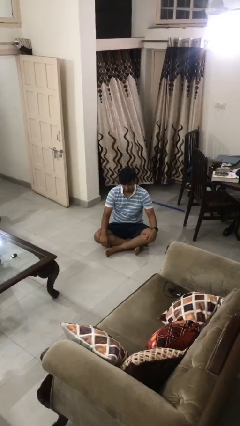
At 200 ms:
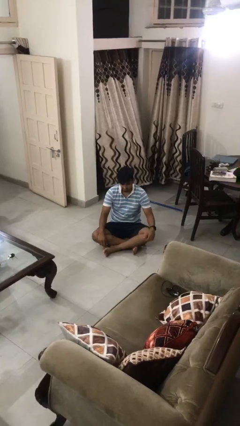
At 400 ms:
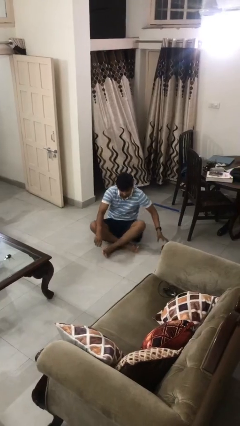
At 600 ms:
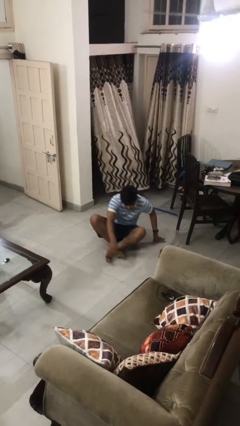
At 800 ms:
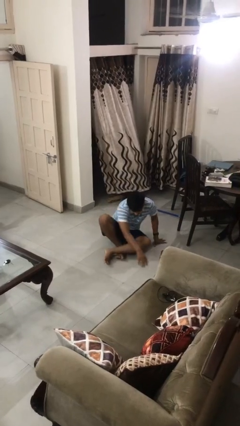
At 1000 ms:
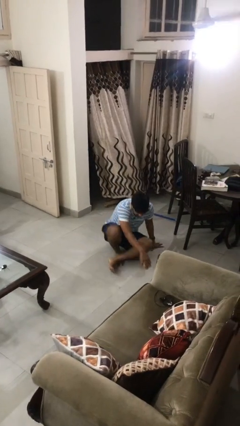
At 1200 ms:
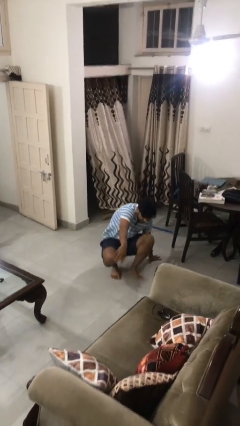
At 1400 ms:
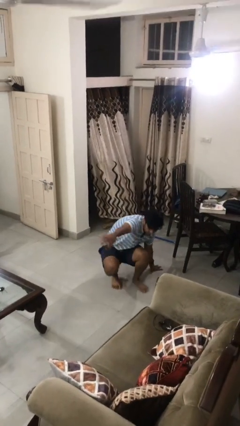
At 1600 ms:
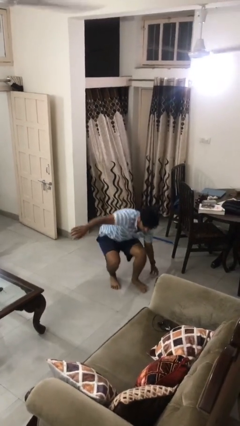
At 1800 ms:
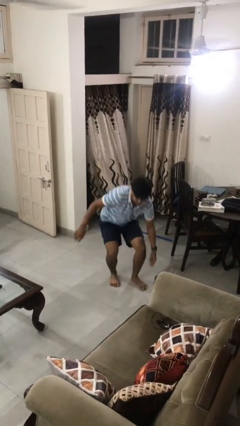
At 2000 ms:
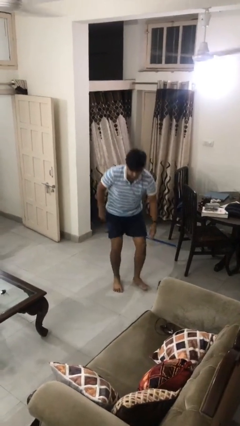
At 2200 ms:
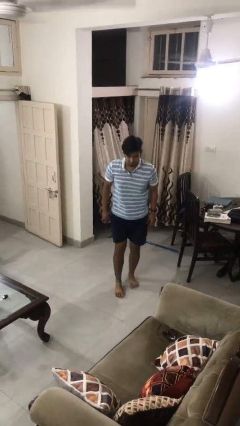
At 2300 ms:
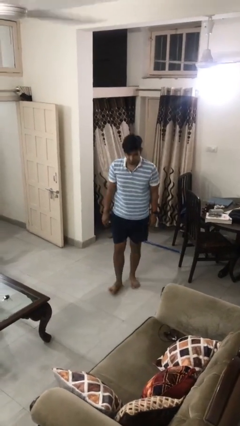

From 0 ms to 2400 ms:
person stands up from floor

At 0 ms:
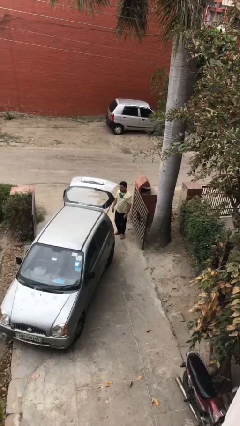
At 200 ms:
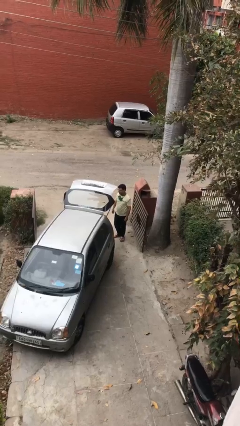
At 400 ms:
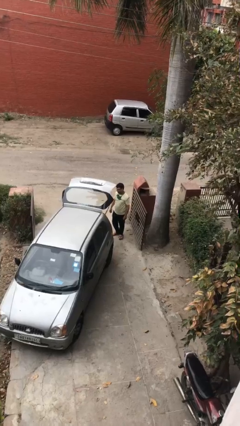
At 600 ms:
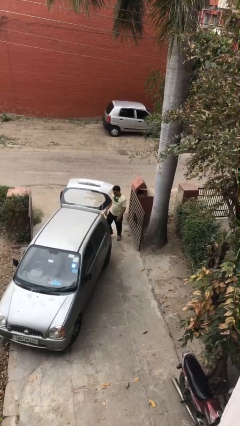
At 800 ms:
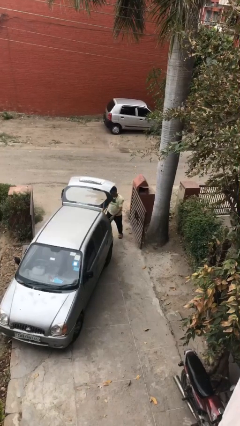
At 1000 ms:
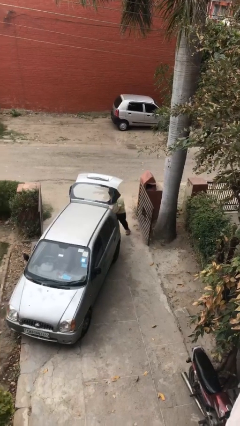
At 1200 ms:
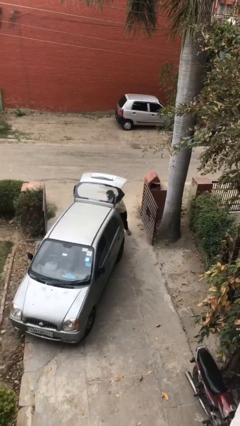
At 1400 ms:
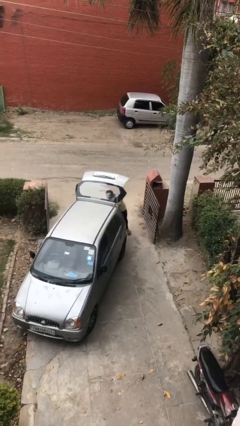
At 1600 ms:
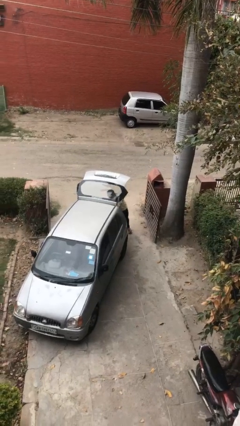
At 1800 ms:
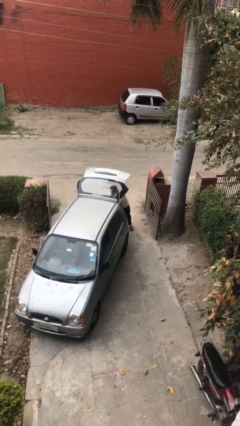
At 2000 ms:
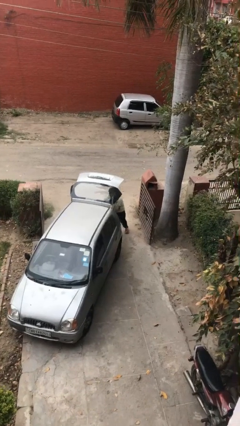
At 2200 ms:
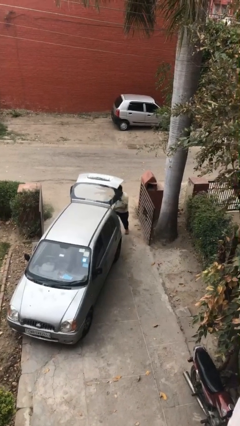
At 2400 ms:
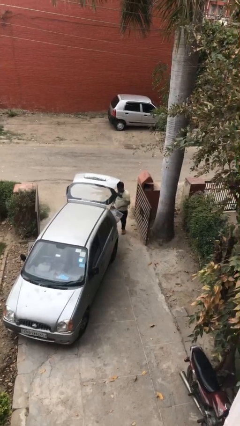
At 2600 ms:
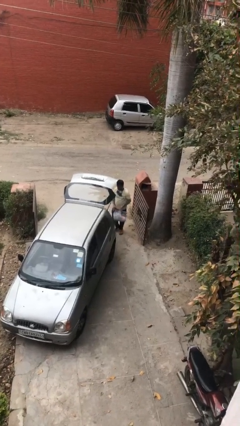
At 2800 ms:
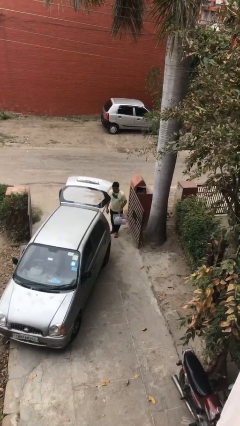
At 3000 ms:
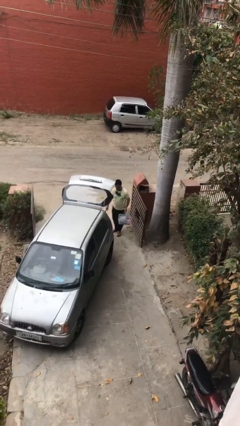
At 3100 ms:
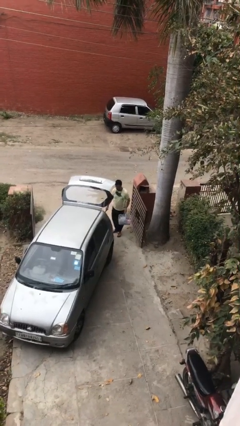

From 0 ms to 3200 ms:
person unloads car

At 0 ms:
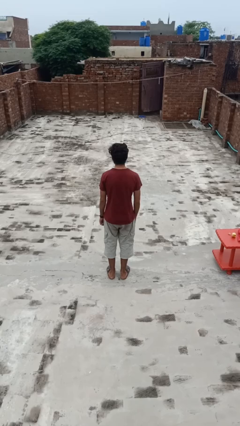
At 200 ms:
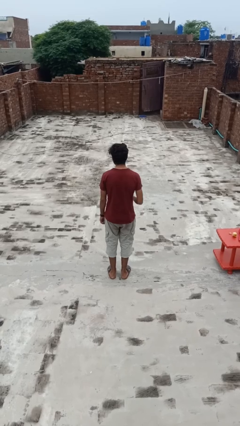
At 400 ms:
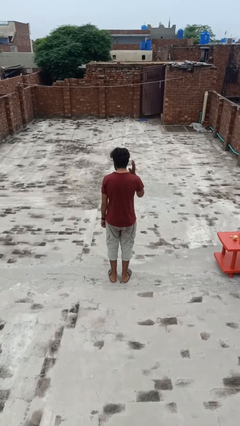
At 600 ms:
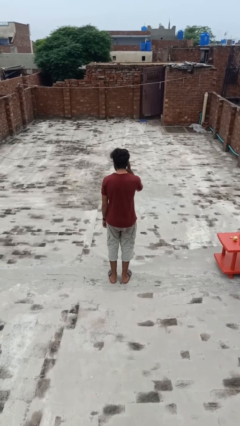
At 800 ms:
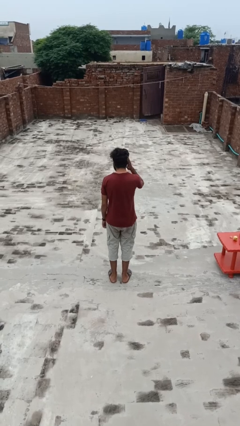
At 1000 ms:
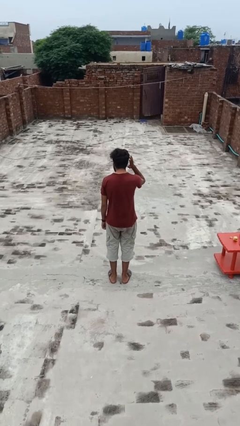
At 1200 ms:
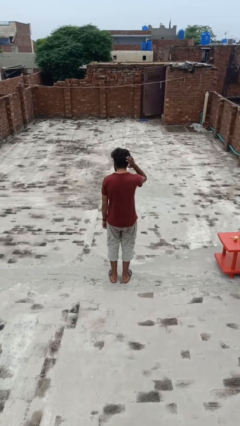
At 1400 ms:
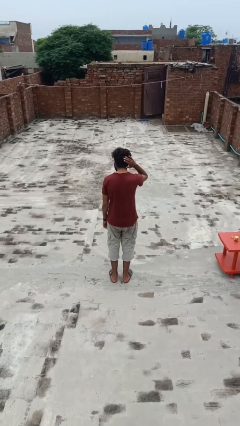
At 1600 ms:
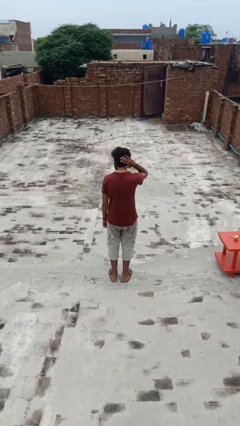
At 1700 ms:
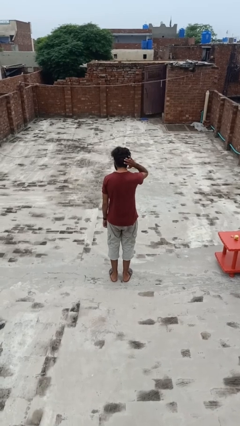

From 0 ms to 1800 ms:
person pats head

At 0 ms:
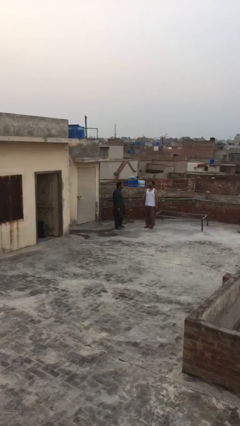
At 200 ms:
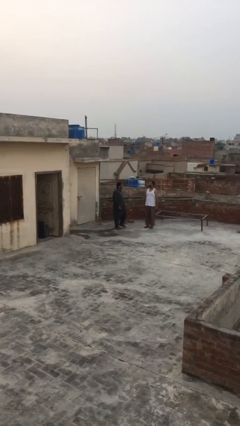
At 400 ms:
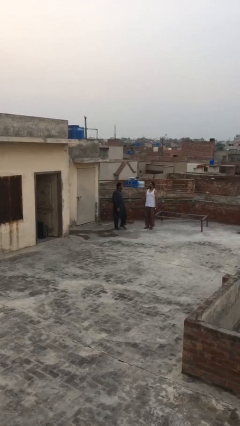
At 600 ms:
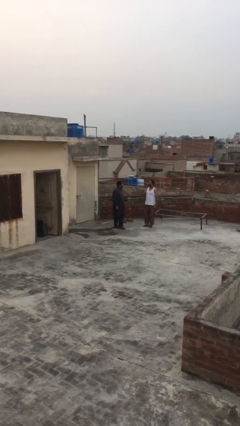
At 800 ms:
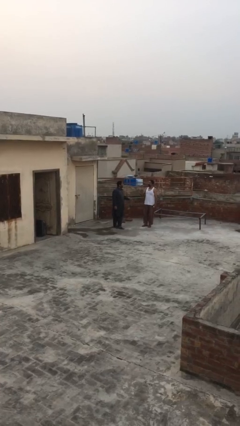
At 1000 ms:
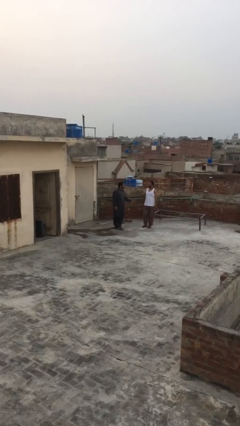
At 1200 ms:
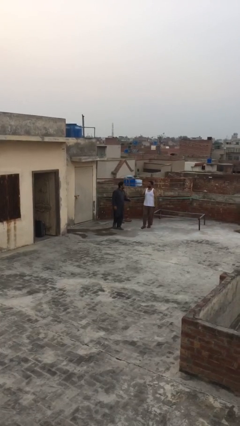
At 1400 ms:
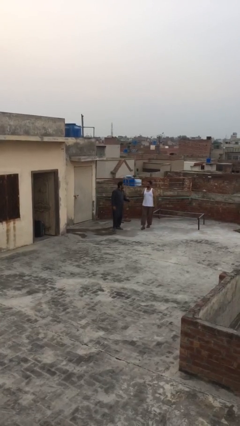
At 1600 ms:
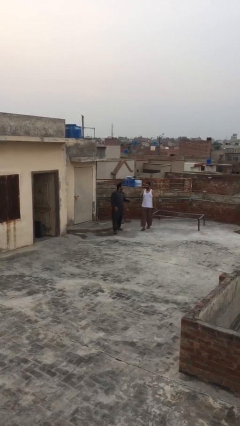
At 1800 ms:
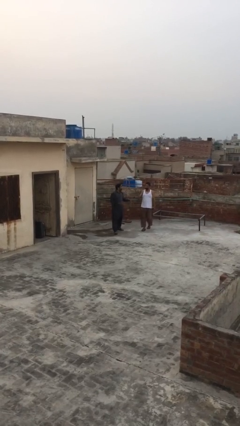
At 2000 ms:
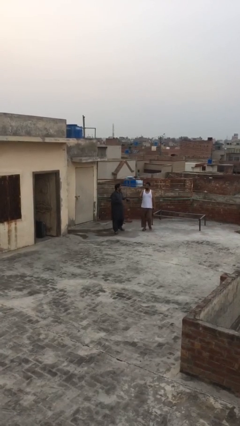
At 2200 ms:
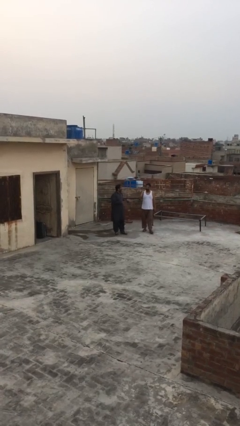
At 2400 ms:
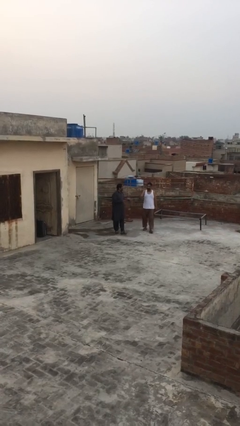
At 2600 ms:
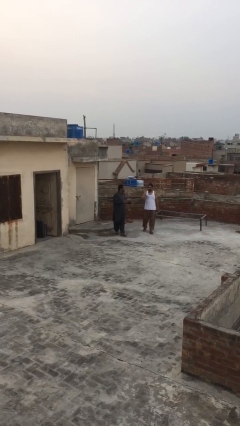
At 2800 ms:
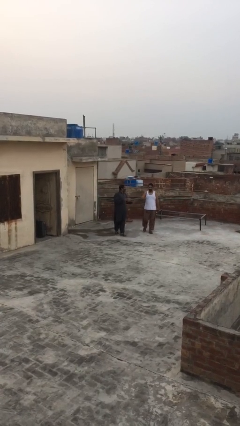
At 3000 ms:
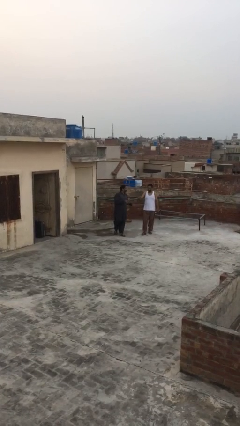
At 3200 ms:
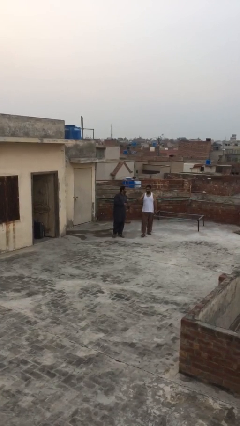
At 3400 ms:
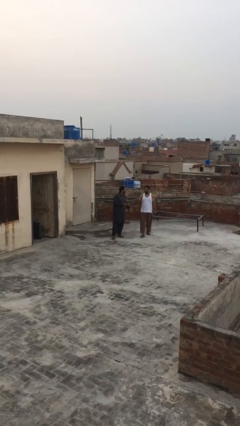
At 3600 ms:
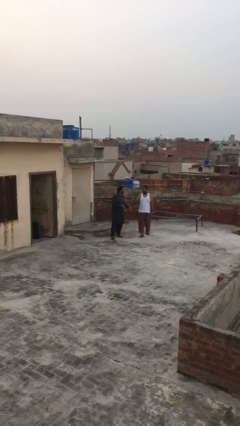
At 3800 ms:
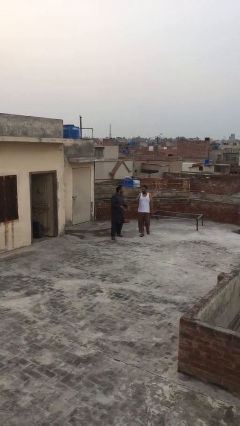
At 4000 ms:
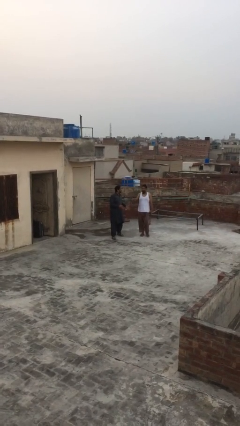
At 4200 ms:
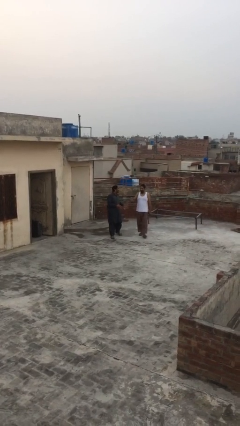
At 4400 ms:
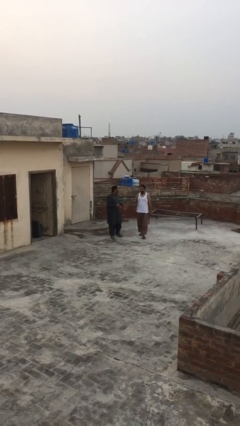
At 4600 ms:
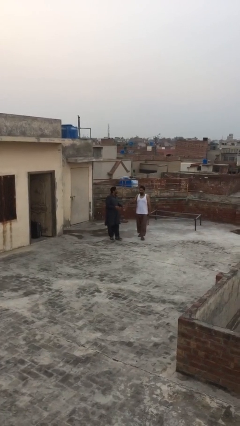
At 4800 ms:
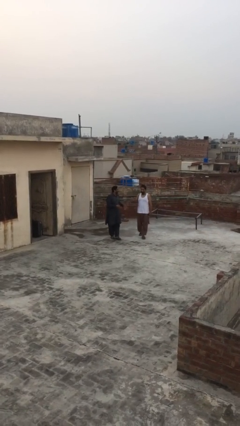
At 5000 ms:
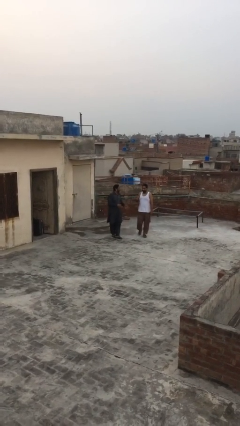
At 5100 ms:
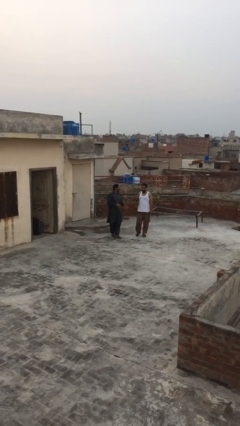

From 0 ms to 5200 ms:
person talks to person

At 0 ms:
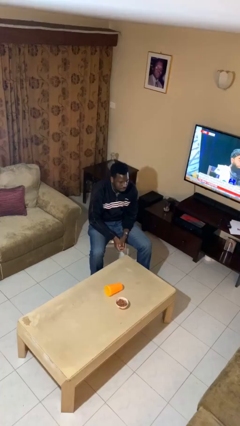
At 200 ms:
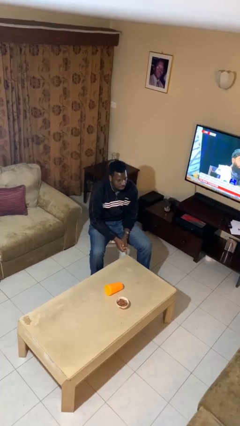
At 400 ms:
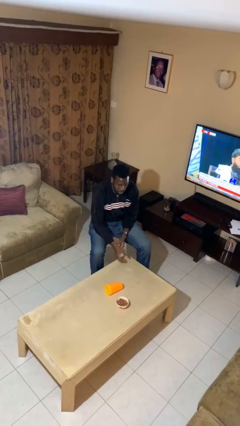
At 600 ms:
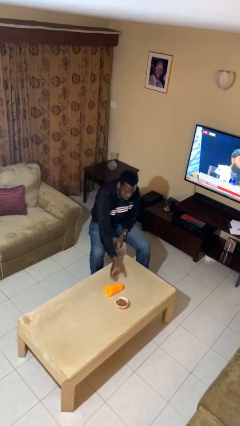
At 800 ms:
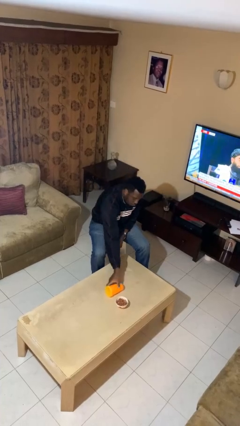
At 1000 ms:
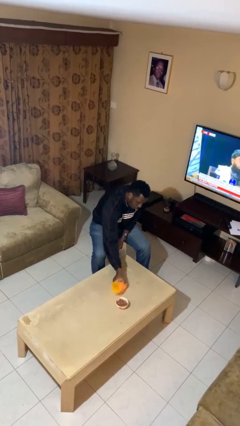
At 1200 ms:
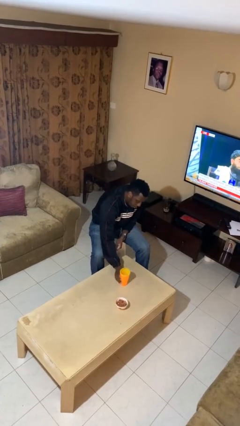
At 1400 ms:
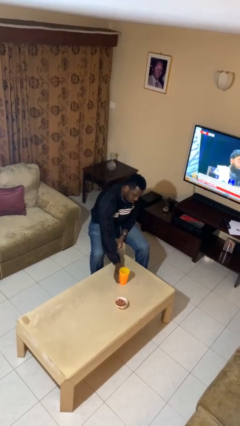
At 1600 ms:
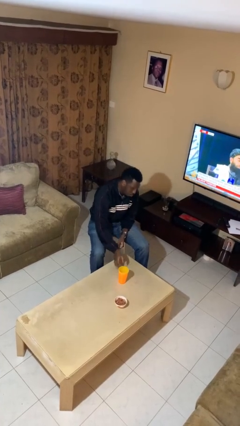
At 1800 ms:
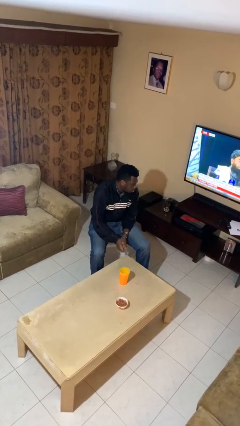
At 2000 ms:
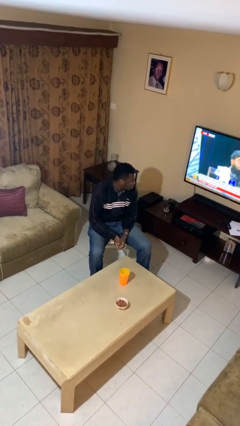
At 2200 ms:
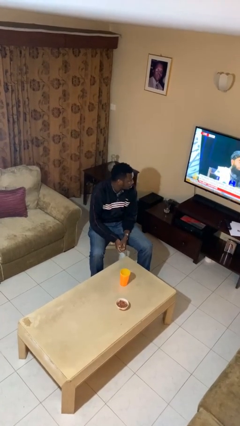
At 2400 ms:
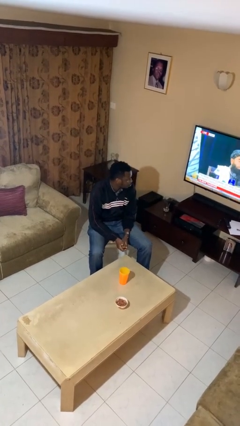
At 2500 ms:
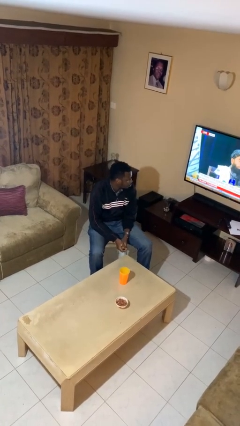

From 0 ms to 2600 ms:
person sets upright glass

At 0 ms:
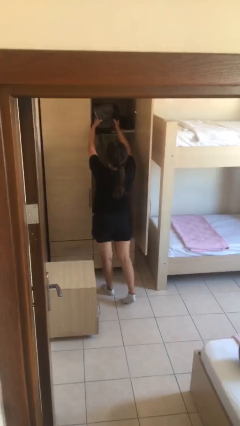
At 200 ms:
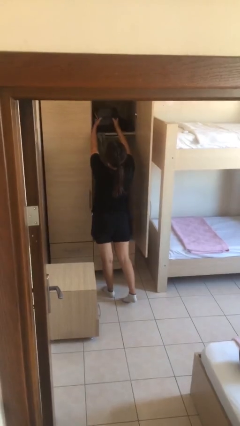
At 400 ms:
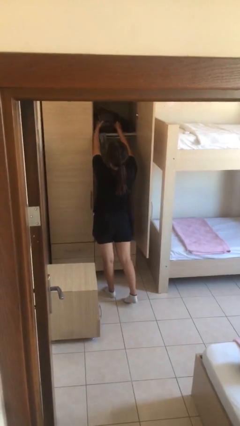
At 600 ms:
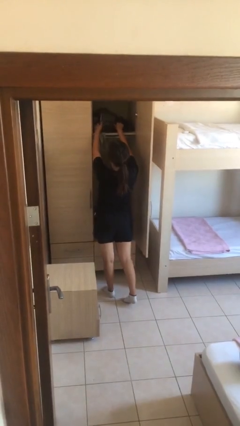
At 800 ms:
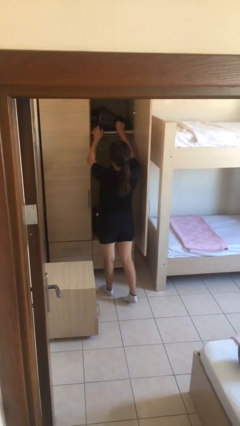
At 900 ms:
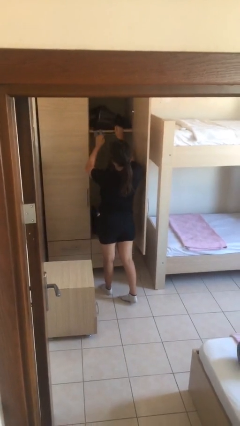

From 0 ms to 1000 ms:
person puts down object on shelf

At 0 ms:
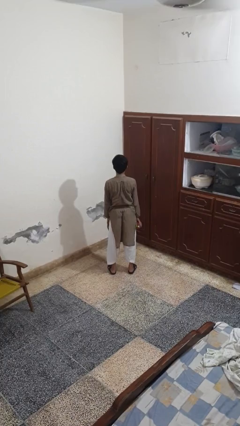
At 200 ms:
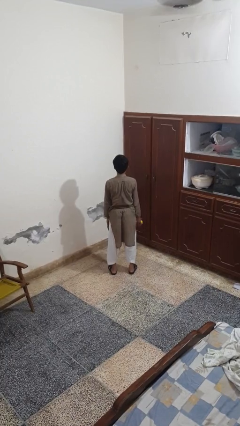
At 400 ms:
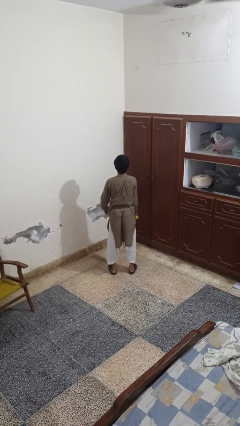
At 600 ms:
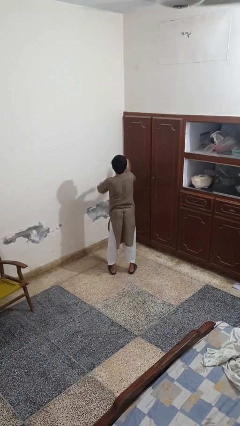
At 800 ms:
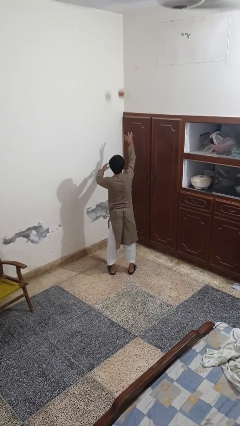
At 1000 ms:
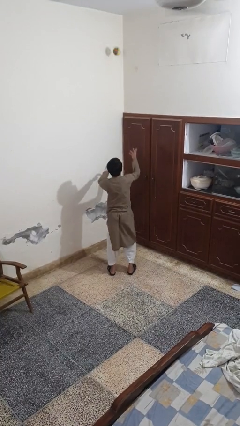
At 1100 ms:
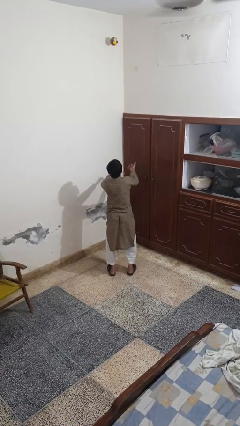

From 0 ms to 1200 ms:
person drops object
